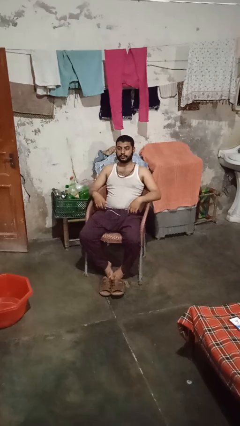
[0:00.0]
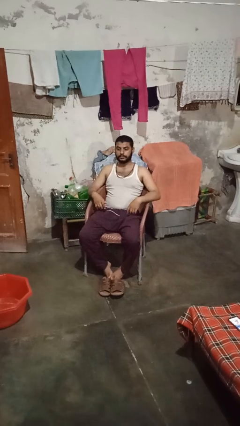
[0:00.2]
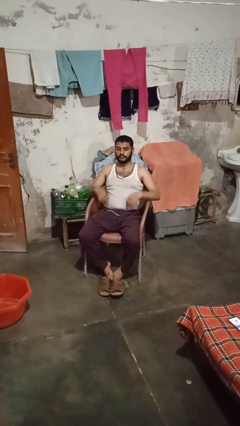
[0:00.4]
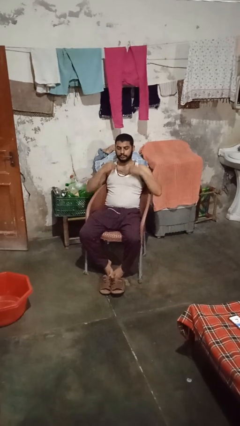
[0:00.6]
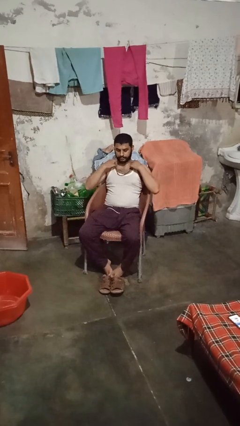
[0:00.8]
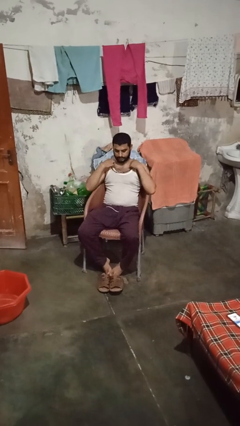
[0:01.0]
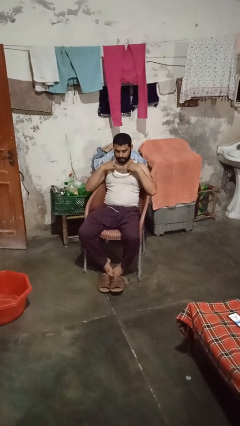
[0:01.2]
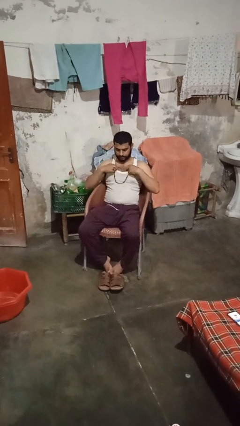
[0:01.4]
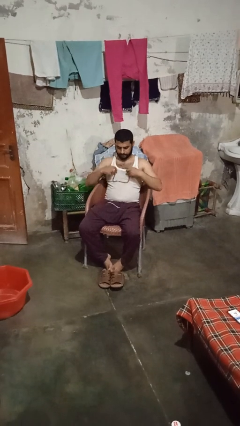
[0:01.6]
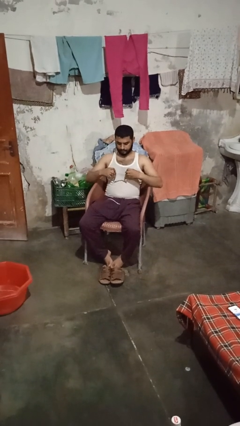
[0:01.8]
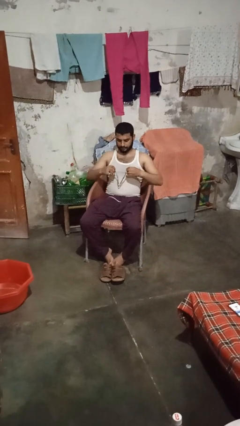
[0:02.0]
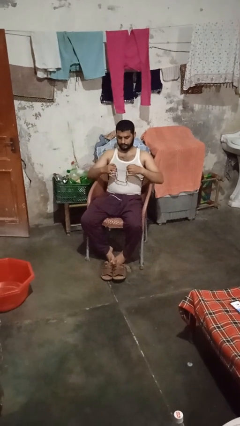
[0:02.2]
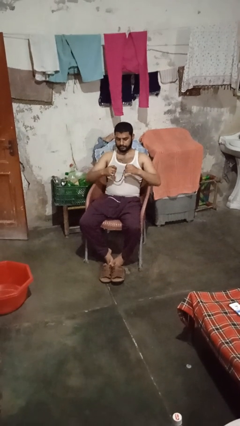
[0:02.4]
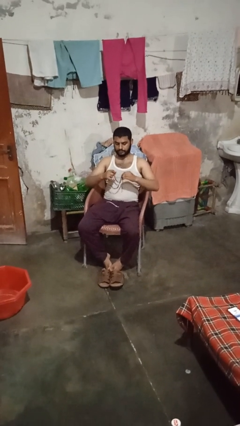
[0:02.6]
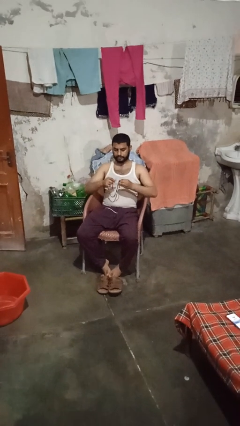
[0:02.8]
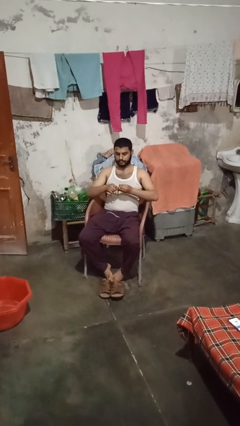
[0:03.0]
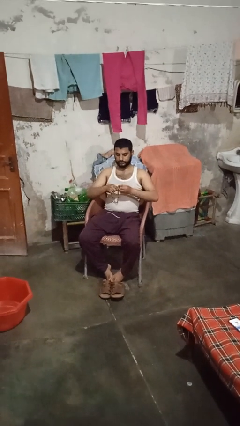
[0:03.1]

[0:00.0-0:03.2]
person takes off necklace

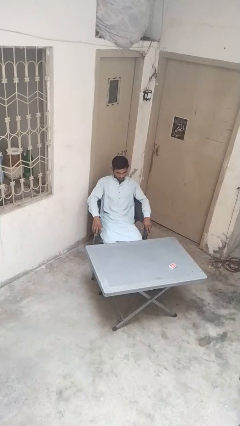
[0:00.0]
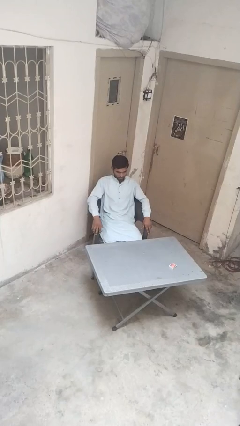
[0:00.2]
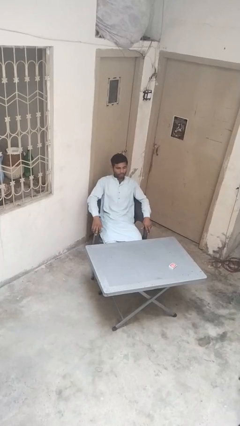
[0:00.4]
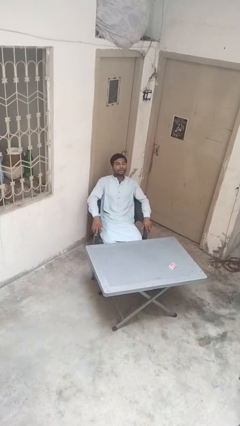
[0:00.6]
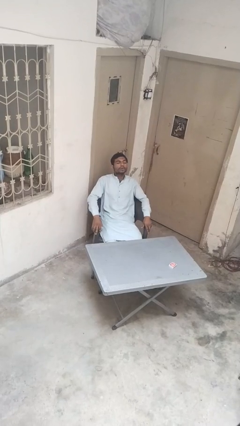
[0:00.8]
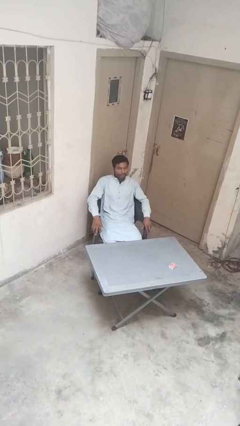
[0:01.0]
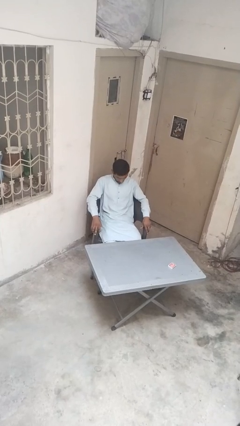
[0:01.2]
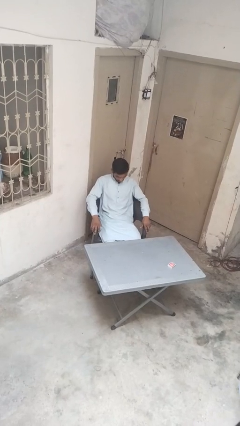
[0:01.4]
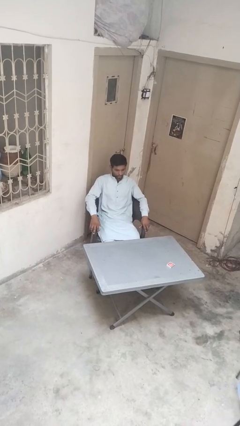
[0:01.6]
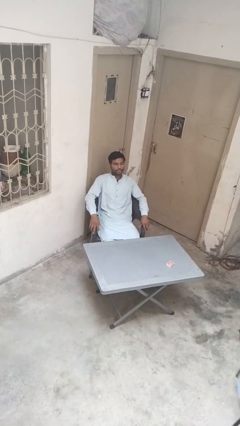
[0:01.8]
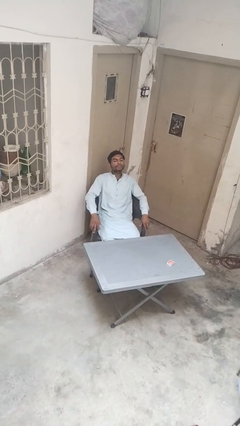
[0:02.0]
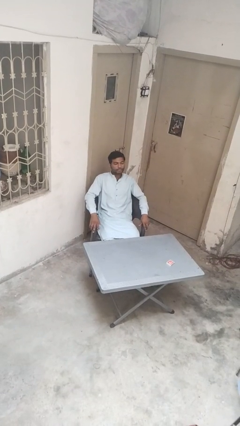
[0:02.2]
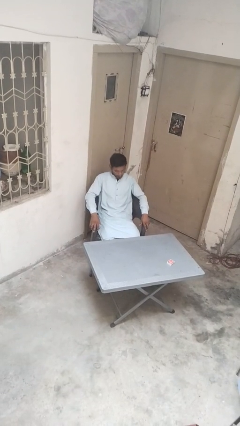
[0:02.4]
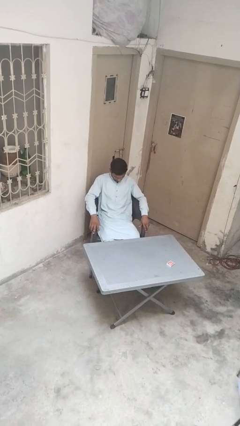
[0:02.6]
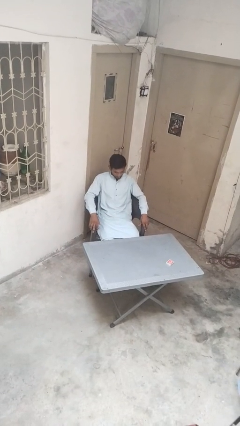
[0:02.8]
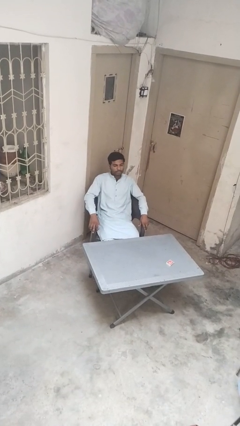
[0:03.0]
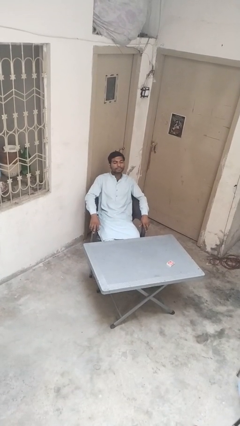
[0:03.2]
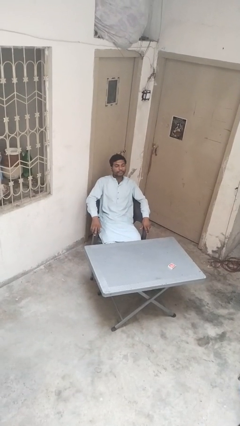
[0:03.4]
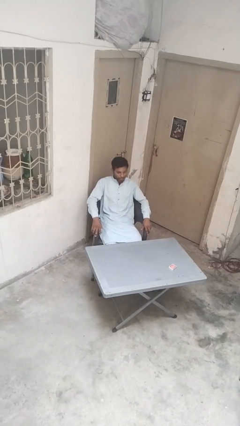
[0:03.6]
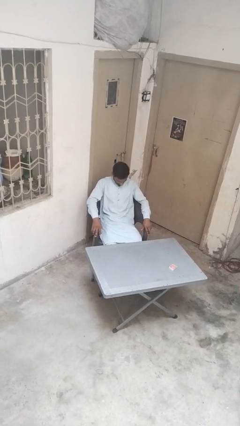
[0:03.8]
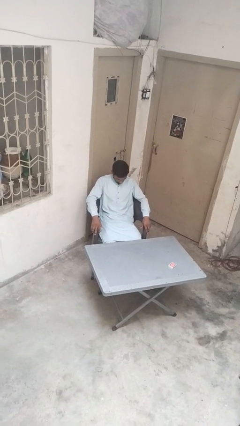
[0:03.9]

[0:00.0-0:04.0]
person nods head

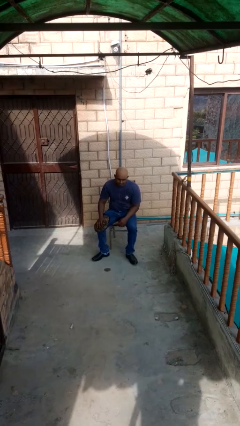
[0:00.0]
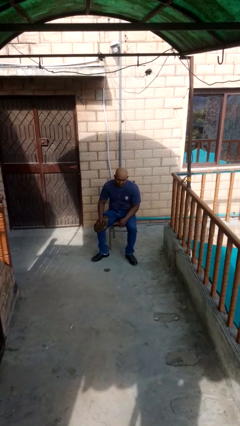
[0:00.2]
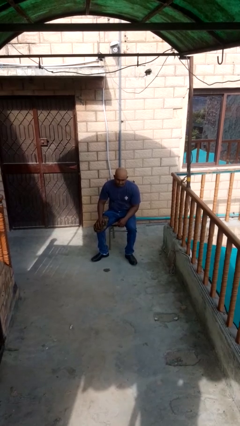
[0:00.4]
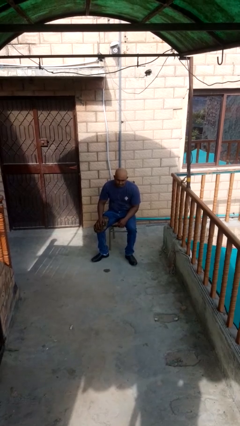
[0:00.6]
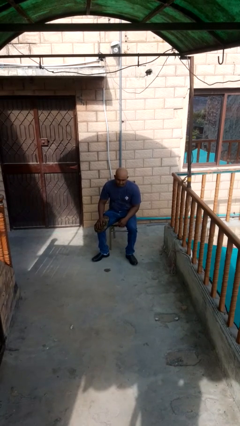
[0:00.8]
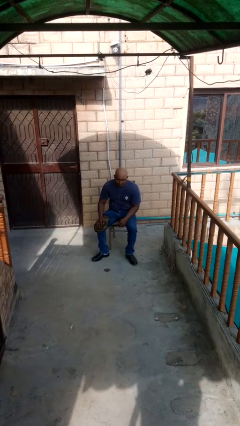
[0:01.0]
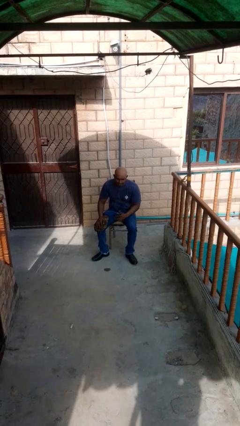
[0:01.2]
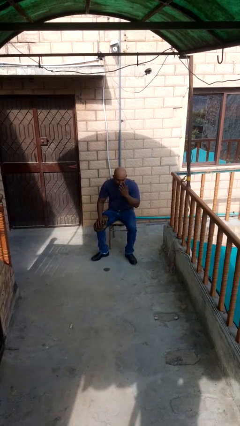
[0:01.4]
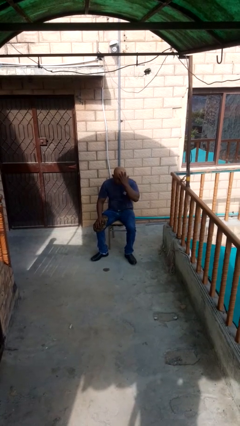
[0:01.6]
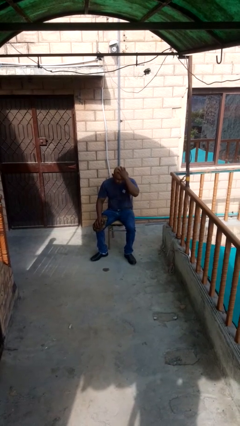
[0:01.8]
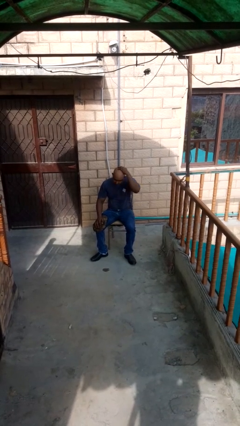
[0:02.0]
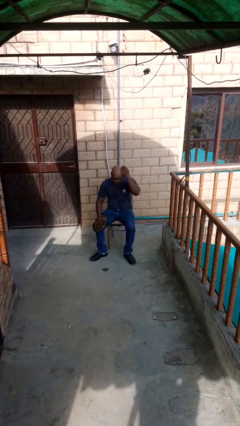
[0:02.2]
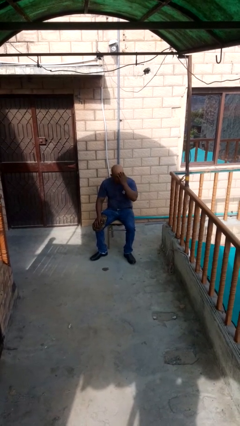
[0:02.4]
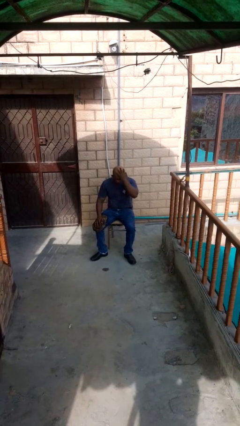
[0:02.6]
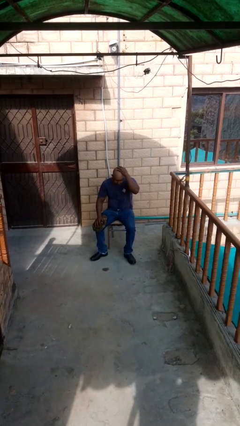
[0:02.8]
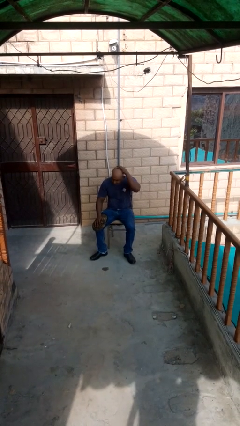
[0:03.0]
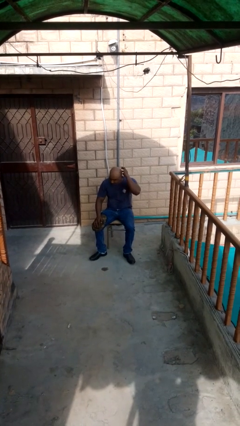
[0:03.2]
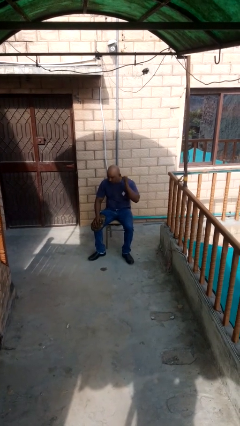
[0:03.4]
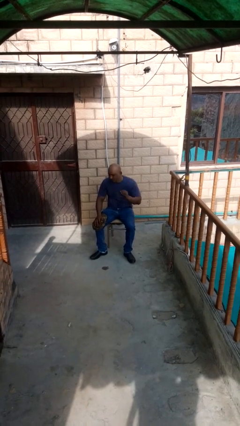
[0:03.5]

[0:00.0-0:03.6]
person strokes hair

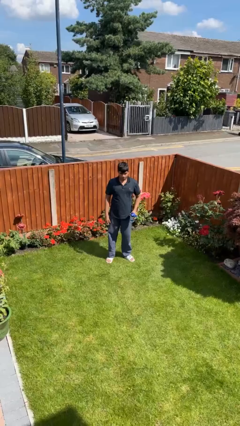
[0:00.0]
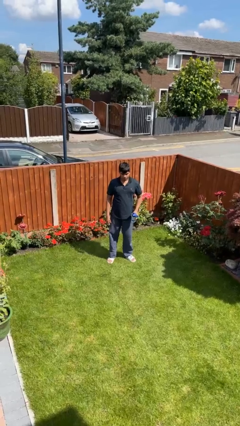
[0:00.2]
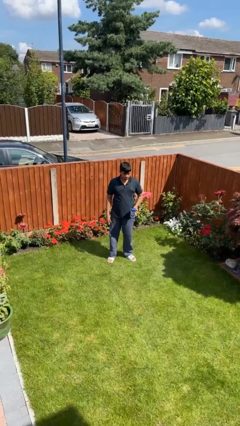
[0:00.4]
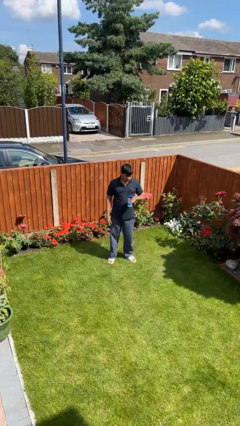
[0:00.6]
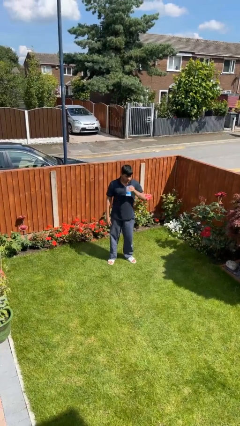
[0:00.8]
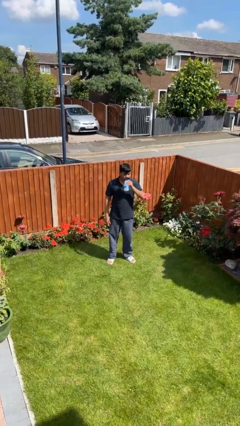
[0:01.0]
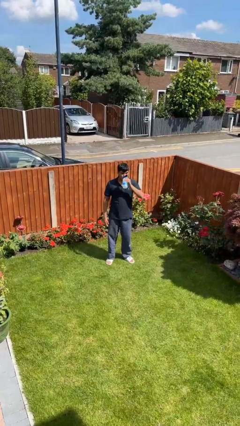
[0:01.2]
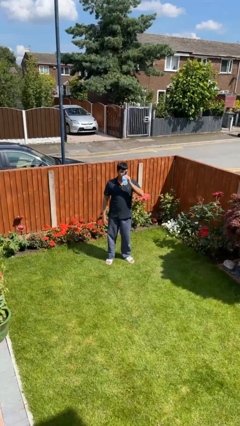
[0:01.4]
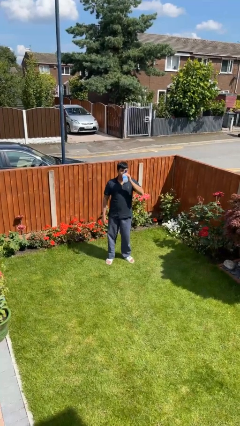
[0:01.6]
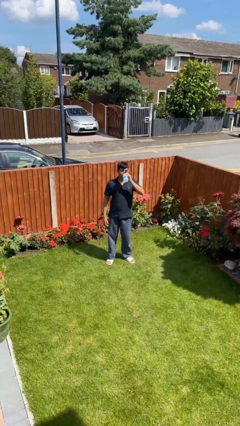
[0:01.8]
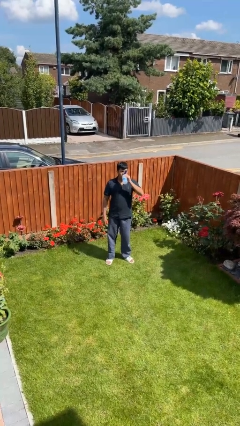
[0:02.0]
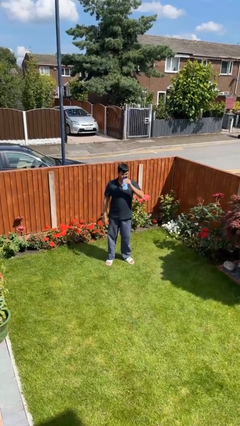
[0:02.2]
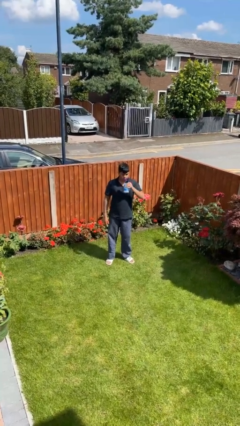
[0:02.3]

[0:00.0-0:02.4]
person drinks from bottle

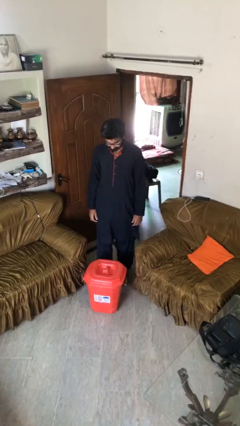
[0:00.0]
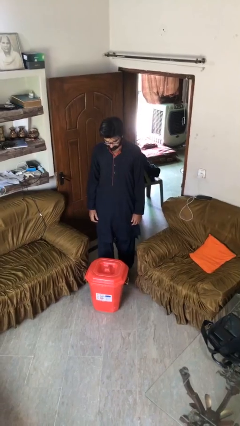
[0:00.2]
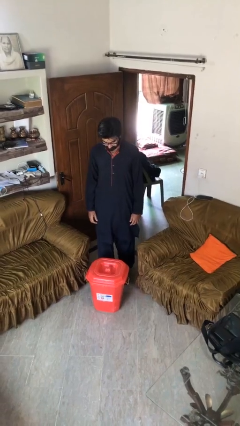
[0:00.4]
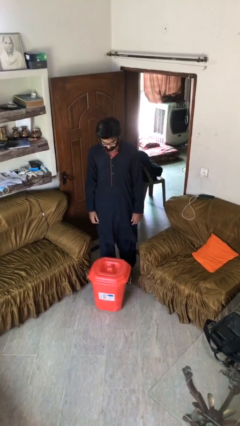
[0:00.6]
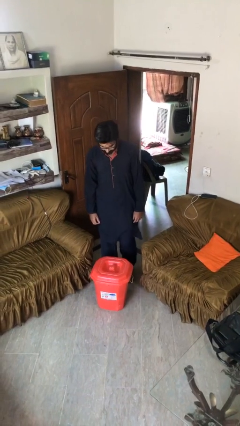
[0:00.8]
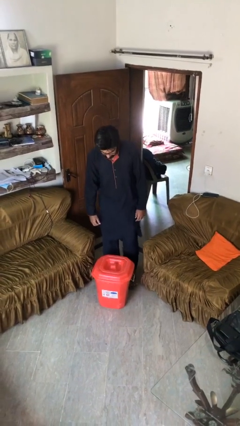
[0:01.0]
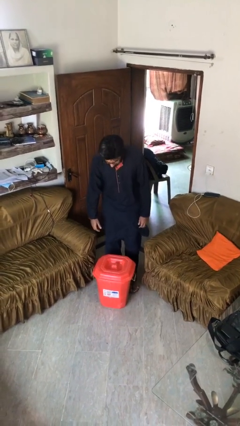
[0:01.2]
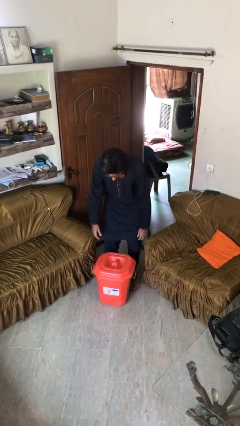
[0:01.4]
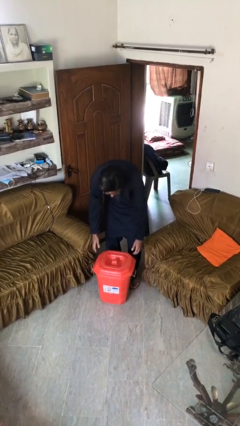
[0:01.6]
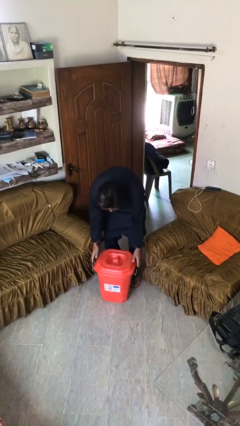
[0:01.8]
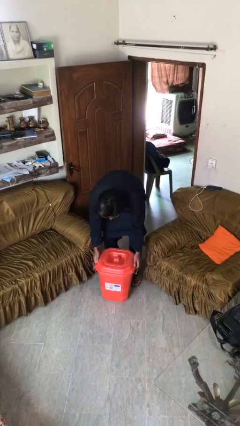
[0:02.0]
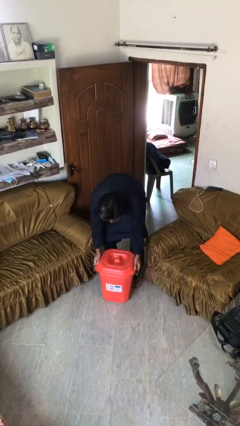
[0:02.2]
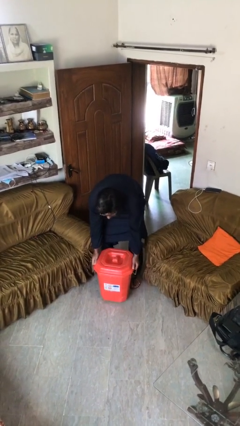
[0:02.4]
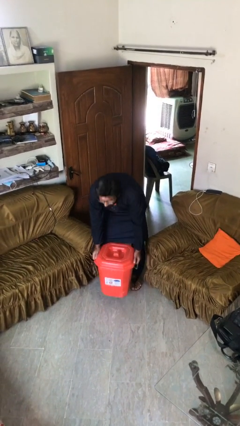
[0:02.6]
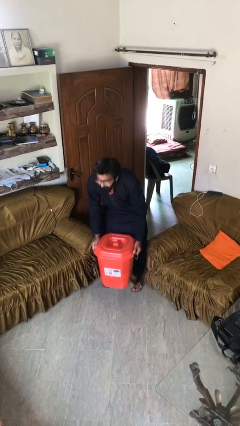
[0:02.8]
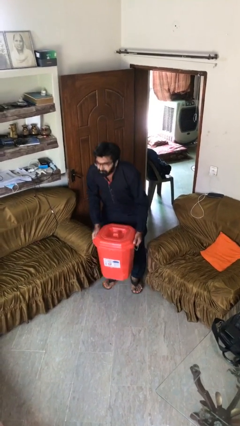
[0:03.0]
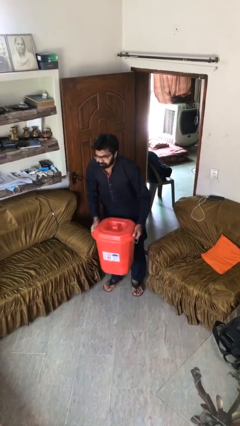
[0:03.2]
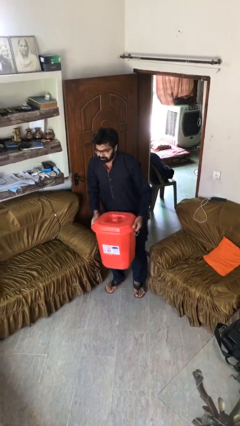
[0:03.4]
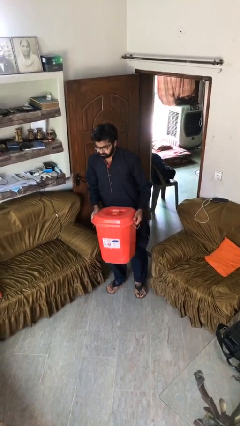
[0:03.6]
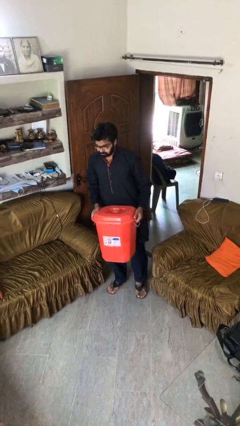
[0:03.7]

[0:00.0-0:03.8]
person picks up object from floor

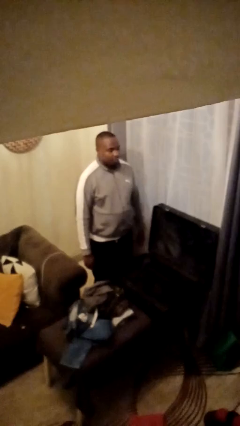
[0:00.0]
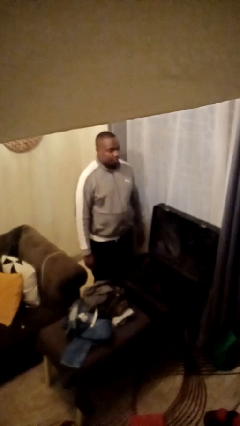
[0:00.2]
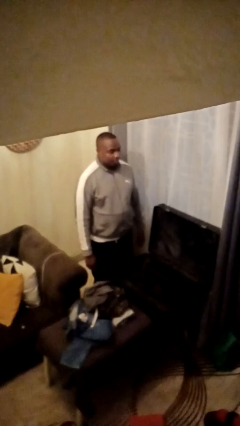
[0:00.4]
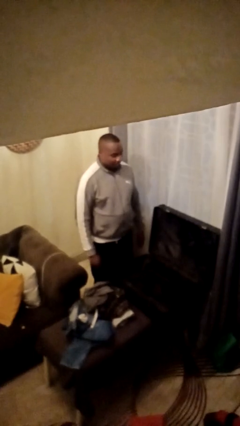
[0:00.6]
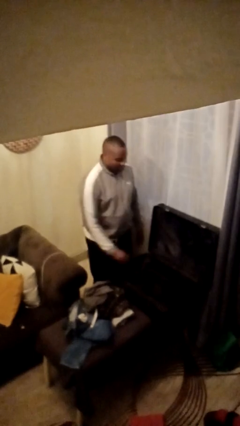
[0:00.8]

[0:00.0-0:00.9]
person unloads clothes from suitcase
